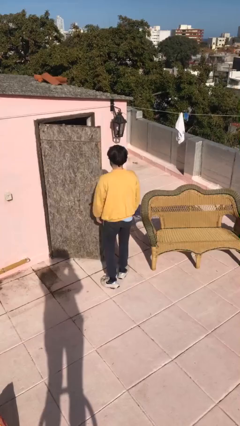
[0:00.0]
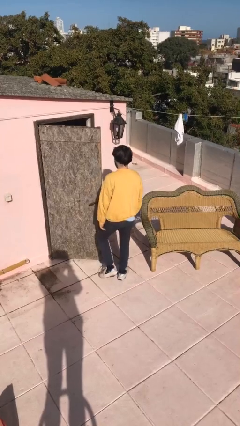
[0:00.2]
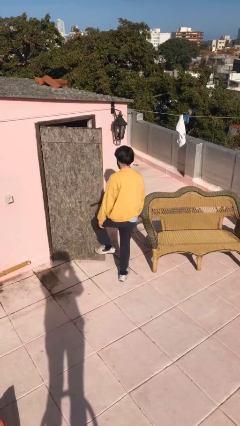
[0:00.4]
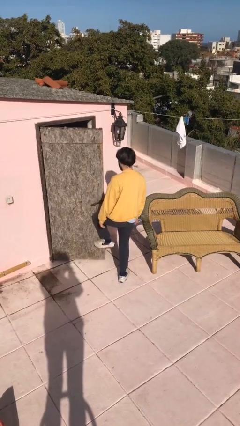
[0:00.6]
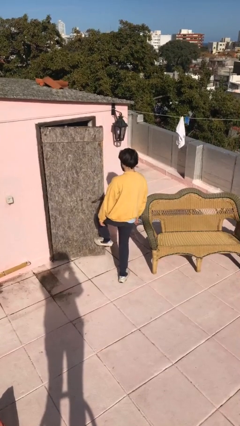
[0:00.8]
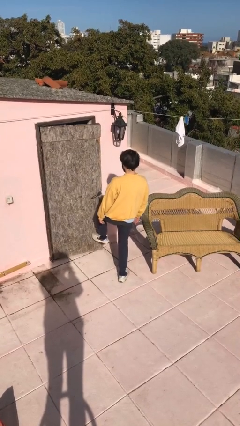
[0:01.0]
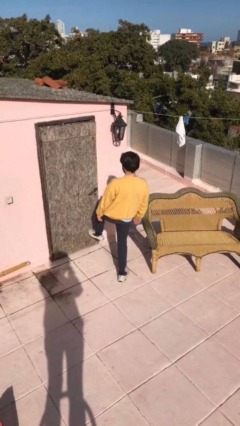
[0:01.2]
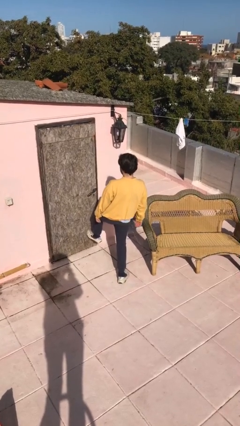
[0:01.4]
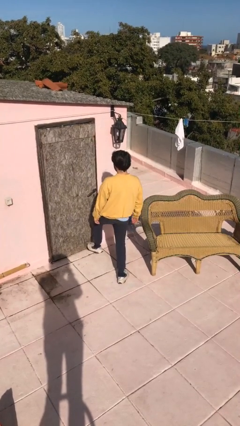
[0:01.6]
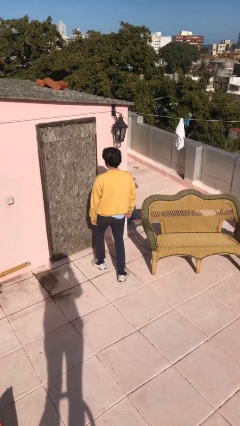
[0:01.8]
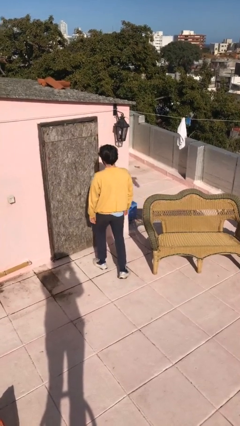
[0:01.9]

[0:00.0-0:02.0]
person closes door with foot

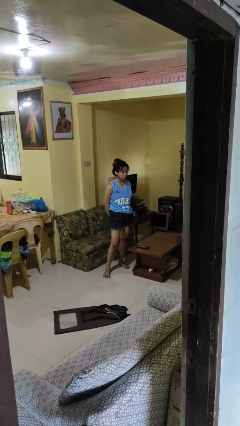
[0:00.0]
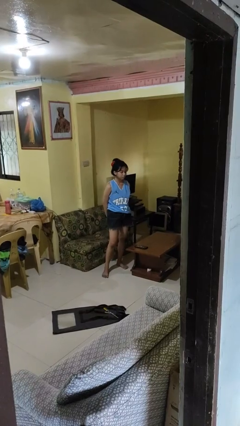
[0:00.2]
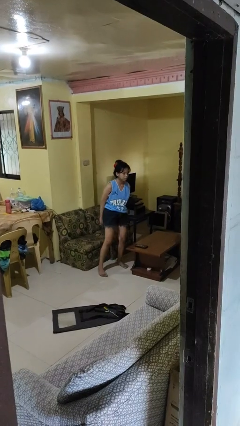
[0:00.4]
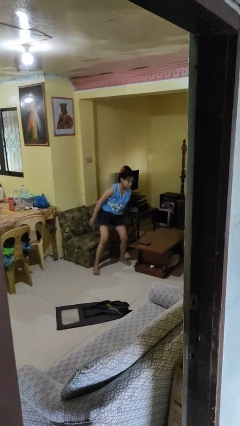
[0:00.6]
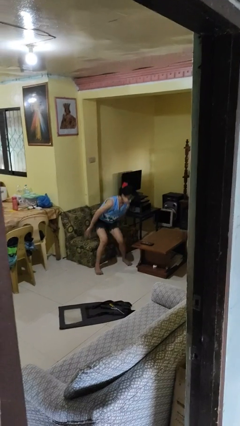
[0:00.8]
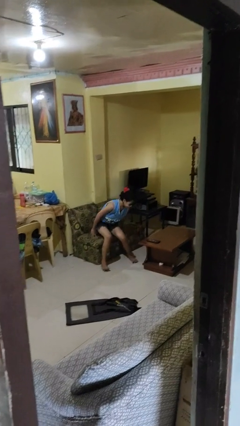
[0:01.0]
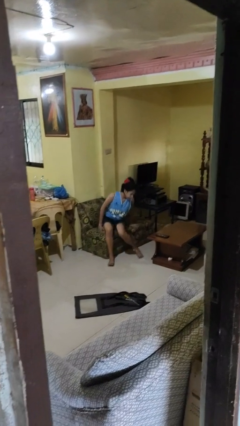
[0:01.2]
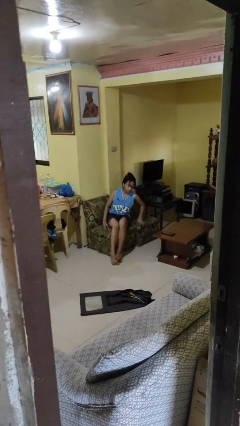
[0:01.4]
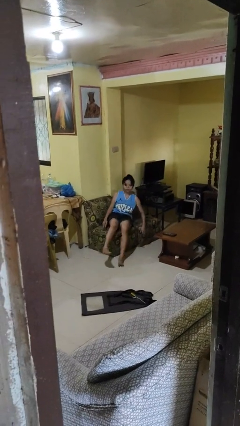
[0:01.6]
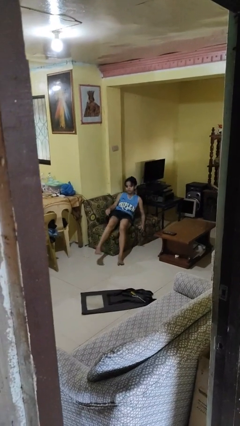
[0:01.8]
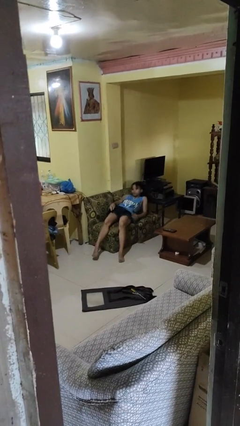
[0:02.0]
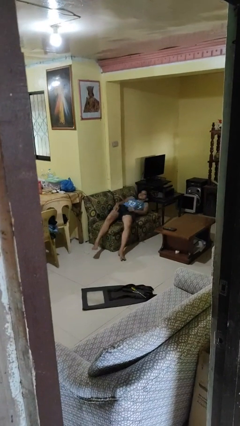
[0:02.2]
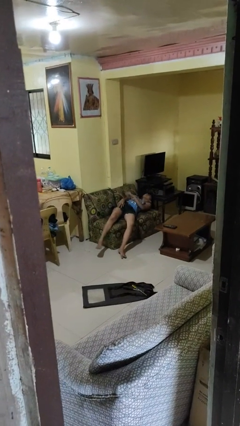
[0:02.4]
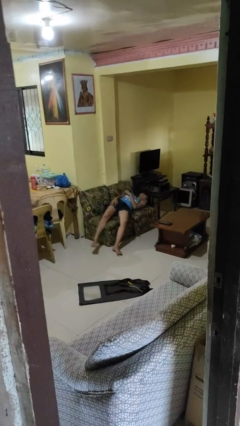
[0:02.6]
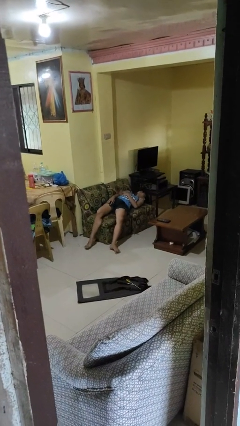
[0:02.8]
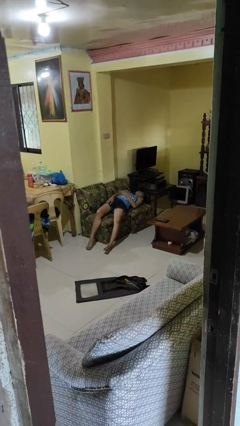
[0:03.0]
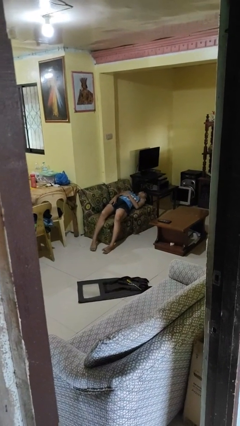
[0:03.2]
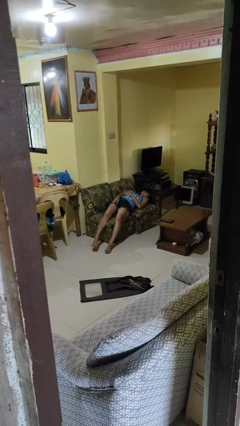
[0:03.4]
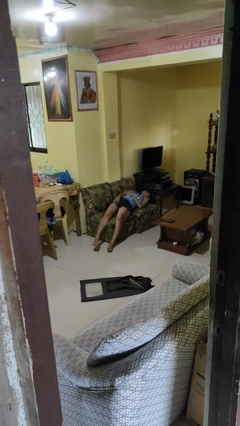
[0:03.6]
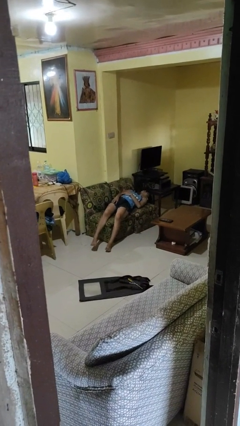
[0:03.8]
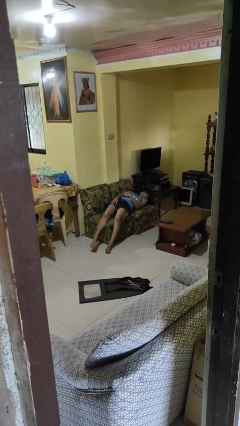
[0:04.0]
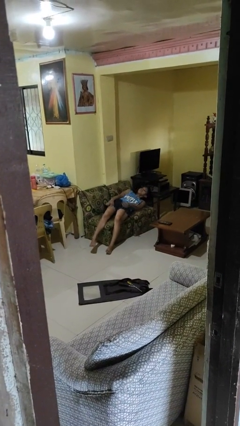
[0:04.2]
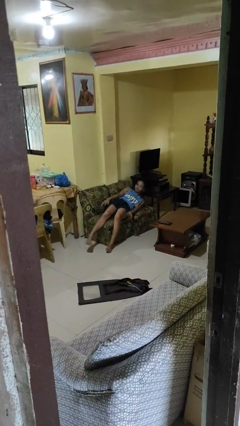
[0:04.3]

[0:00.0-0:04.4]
person lies down on couch

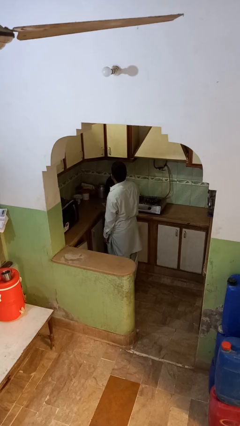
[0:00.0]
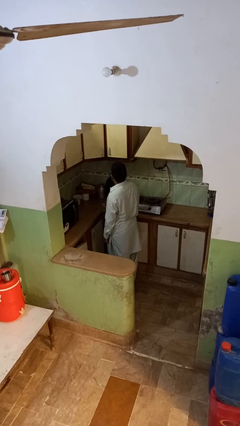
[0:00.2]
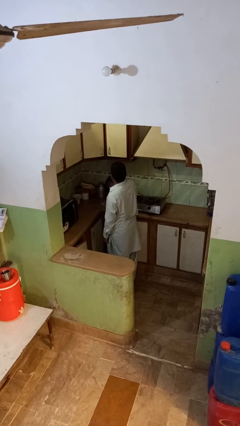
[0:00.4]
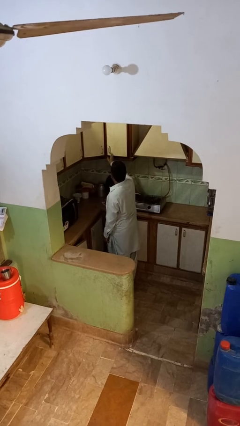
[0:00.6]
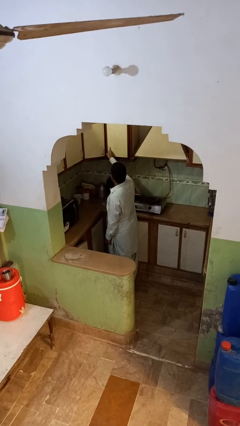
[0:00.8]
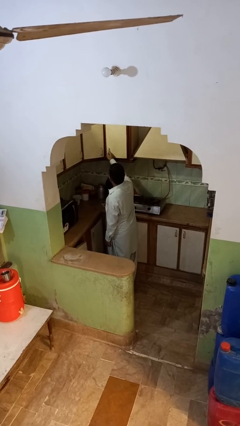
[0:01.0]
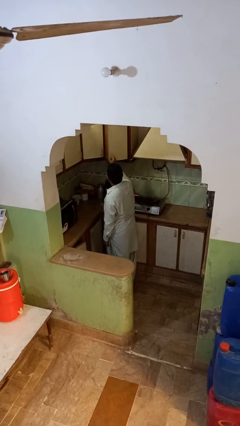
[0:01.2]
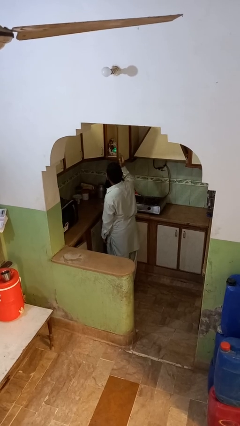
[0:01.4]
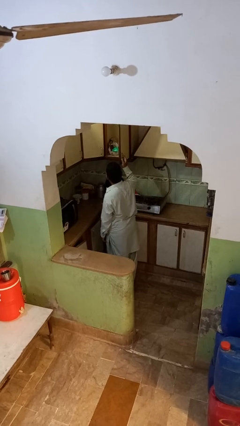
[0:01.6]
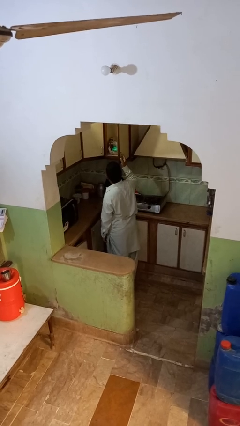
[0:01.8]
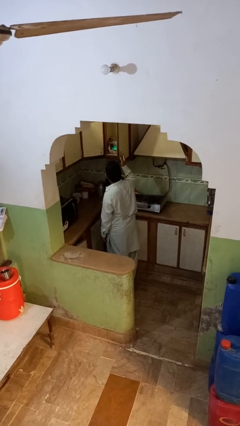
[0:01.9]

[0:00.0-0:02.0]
person opens cabinet

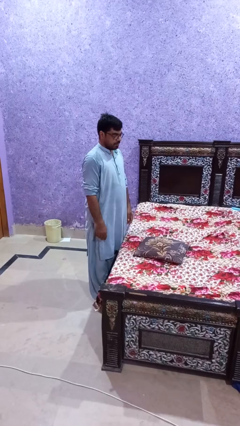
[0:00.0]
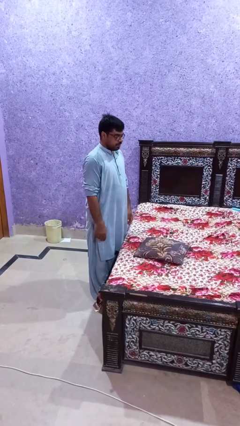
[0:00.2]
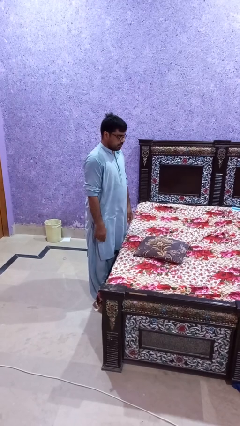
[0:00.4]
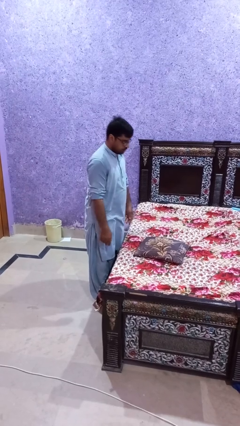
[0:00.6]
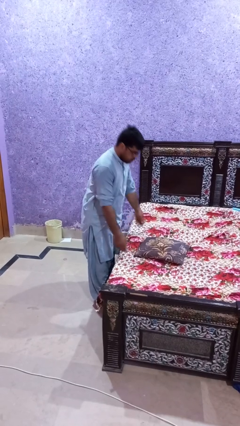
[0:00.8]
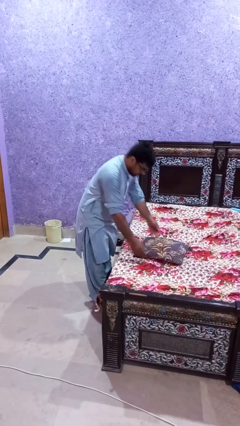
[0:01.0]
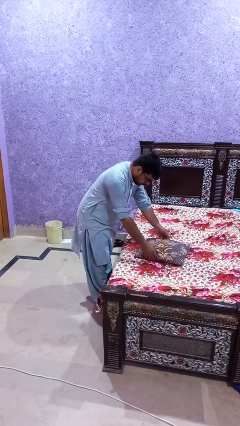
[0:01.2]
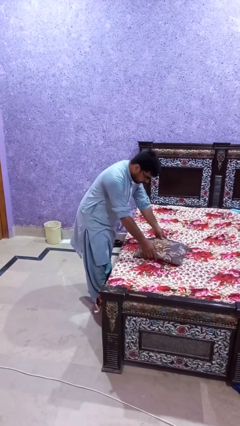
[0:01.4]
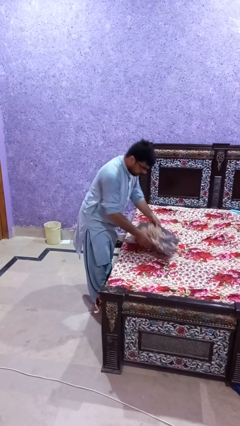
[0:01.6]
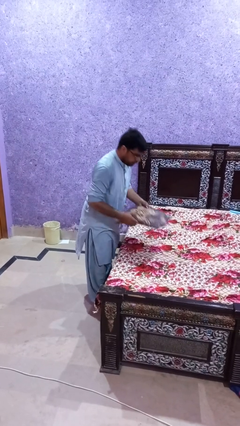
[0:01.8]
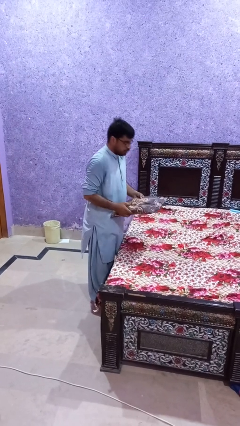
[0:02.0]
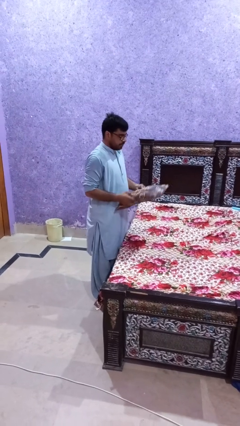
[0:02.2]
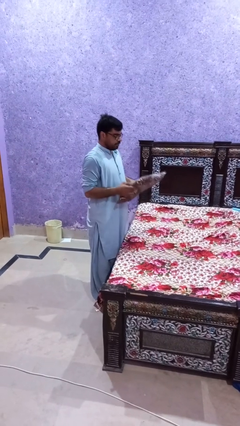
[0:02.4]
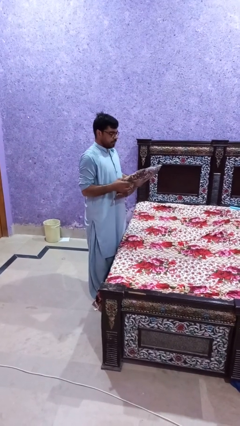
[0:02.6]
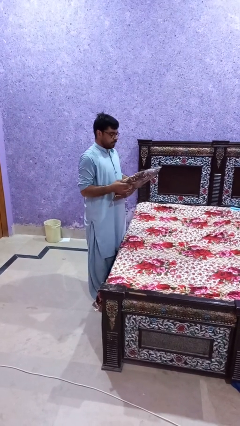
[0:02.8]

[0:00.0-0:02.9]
person picks up object from bed

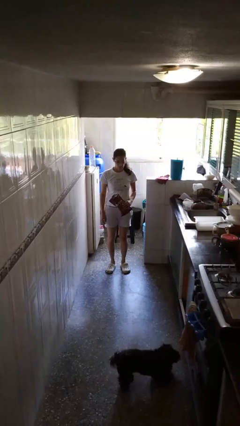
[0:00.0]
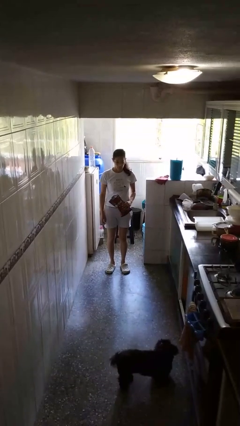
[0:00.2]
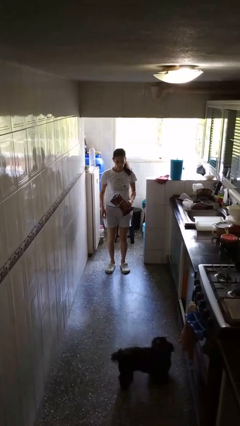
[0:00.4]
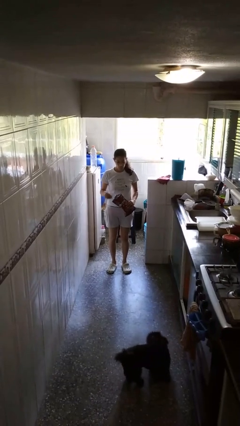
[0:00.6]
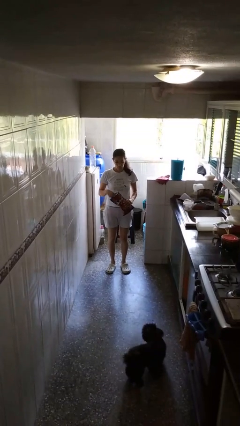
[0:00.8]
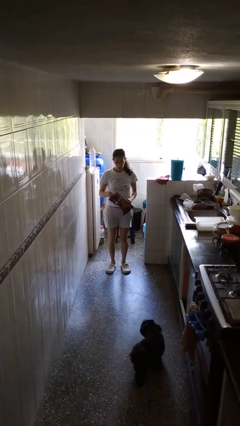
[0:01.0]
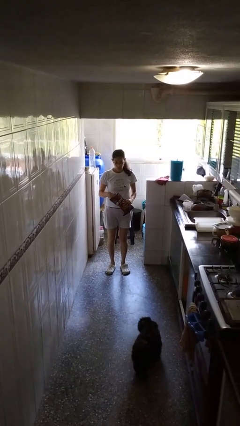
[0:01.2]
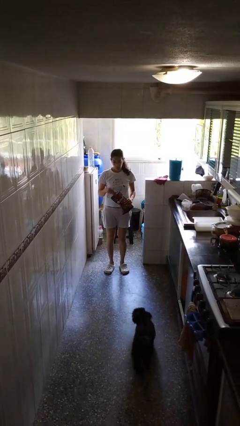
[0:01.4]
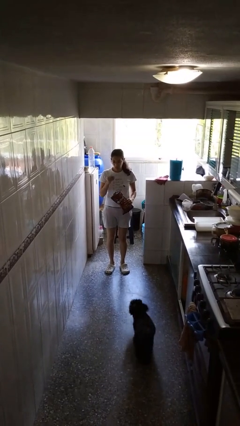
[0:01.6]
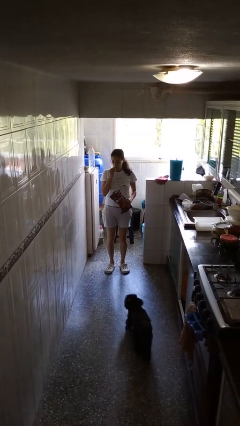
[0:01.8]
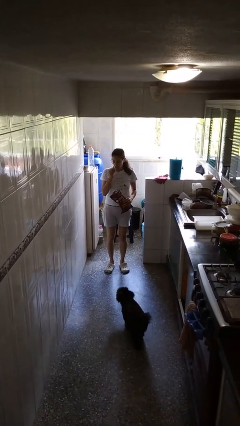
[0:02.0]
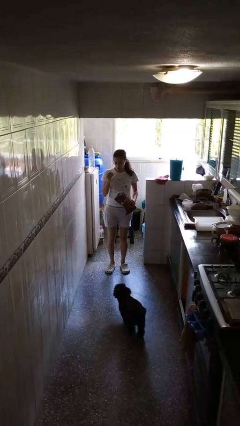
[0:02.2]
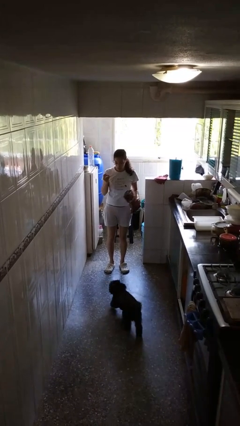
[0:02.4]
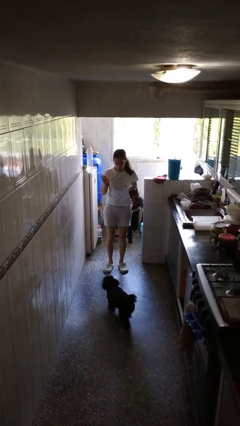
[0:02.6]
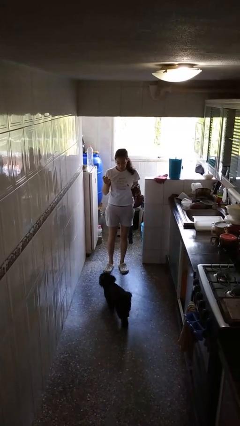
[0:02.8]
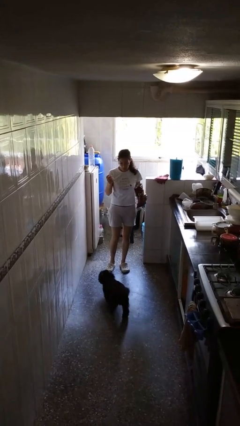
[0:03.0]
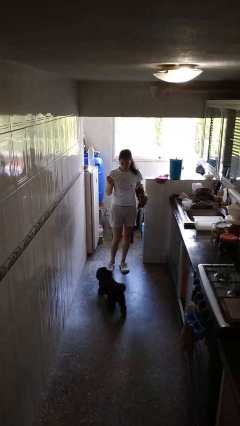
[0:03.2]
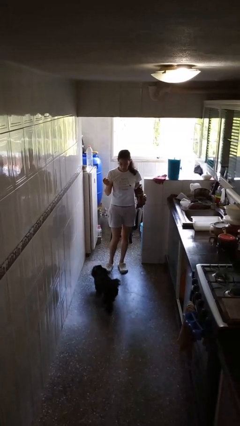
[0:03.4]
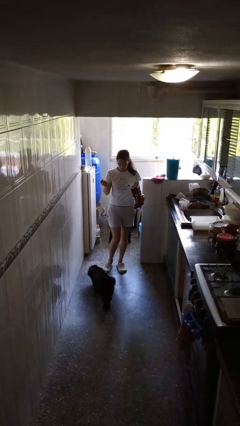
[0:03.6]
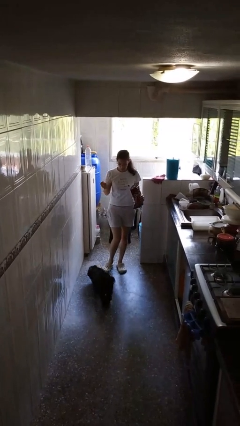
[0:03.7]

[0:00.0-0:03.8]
person eats snack from bag

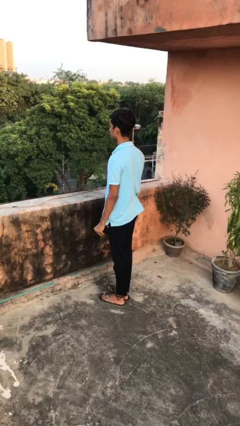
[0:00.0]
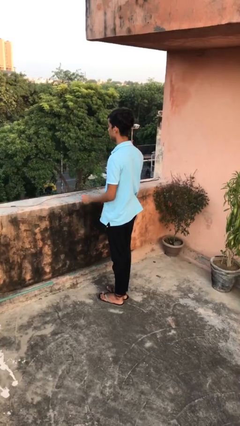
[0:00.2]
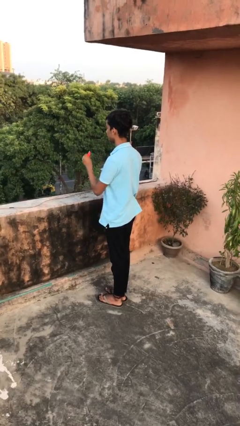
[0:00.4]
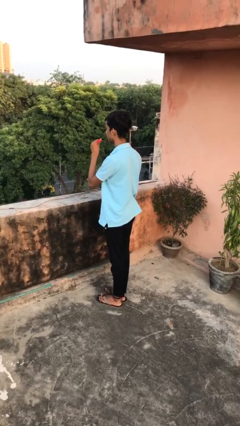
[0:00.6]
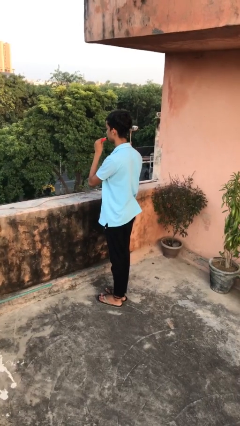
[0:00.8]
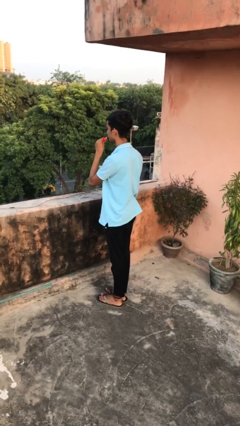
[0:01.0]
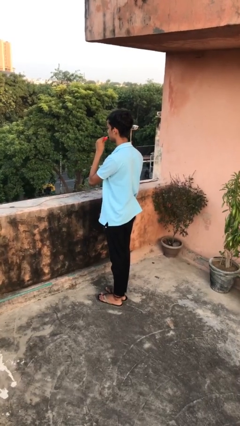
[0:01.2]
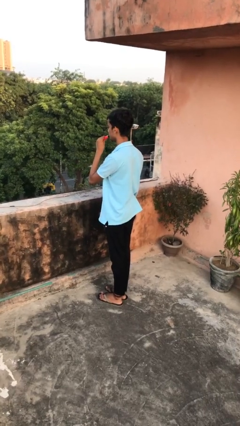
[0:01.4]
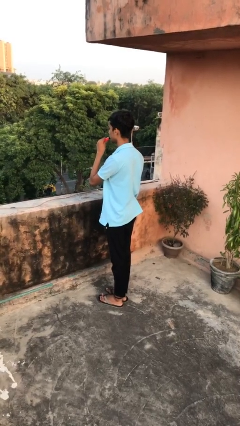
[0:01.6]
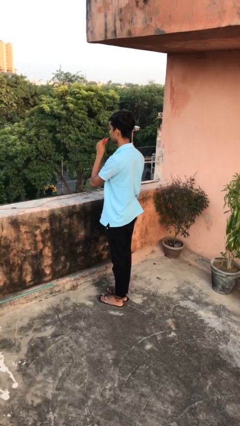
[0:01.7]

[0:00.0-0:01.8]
person vapes

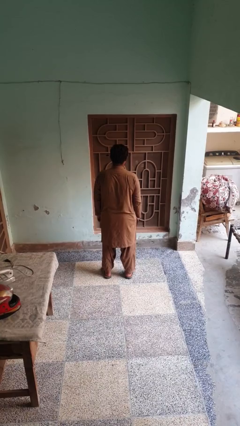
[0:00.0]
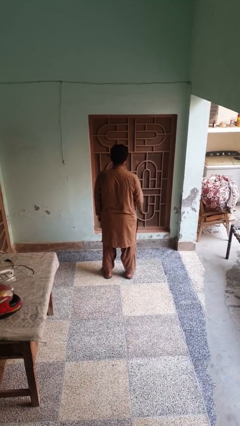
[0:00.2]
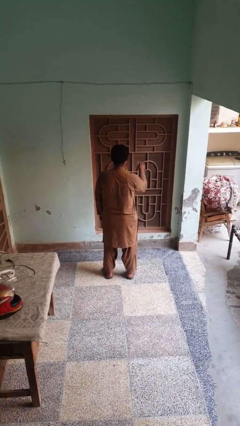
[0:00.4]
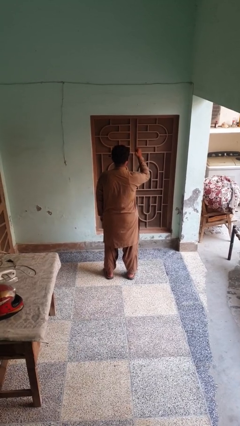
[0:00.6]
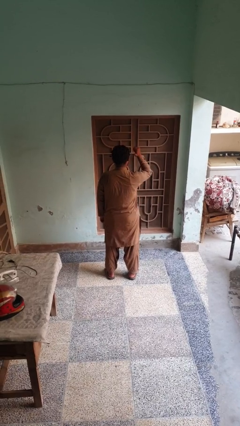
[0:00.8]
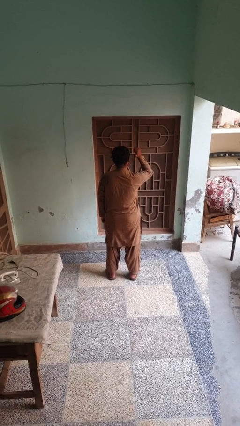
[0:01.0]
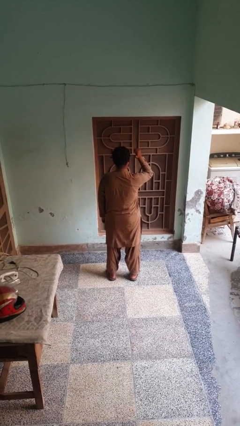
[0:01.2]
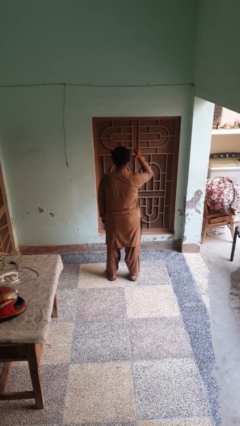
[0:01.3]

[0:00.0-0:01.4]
person gestures behind me
